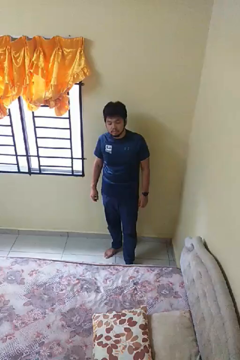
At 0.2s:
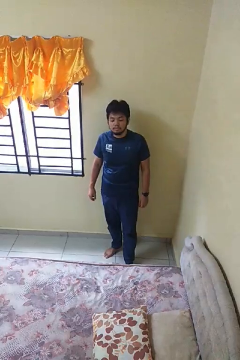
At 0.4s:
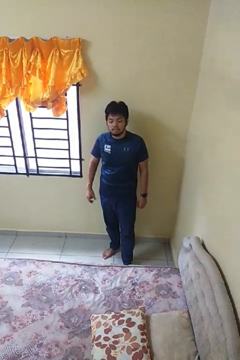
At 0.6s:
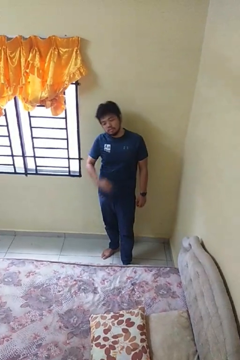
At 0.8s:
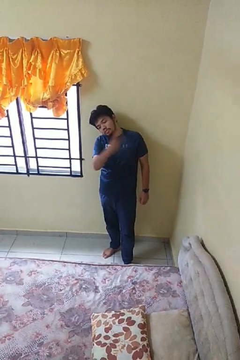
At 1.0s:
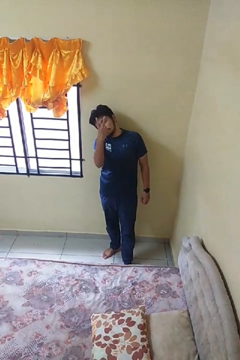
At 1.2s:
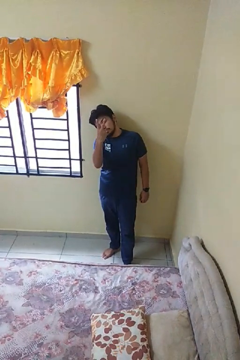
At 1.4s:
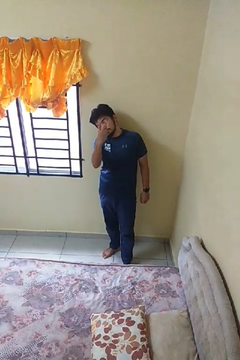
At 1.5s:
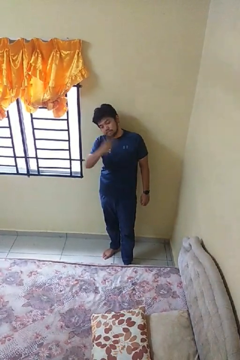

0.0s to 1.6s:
person gestures peace

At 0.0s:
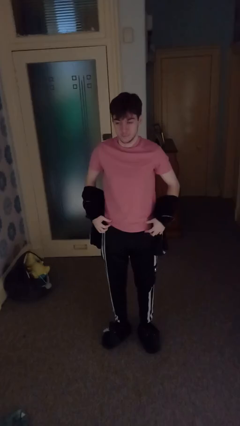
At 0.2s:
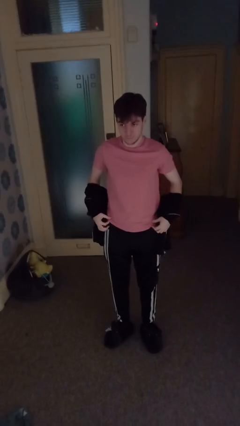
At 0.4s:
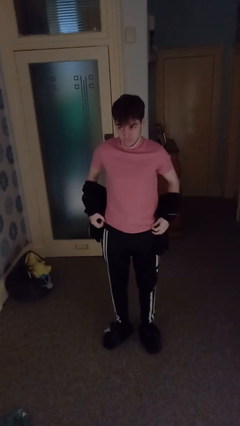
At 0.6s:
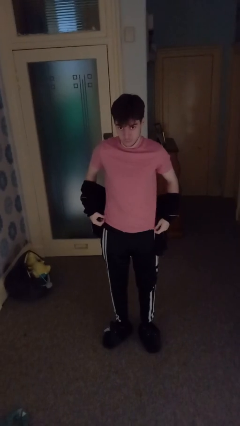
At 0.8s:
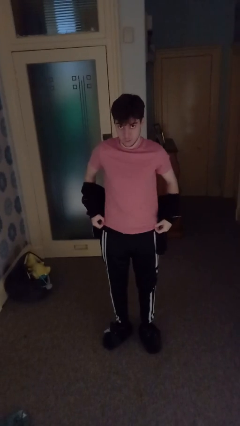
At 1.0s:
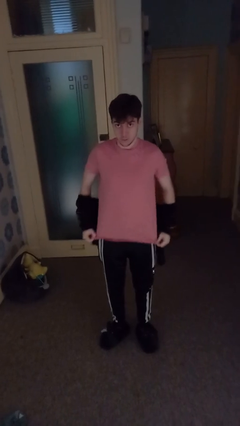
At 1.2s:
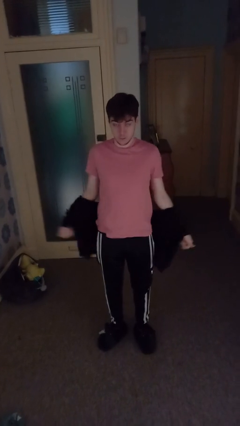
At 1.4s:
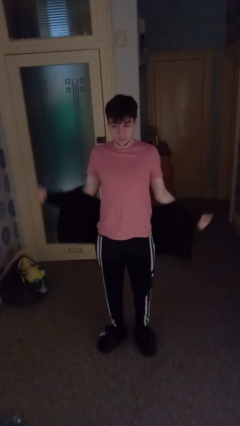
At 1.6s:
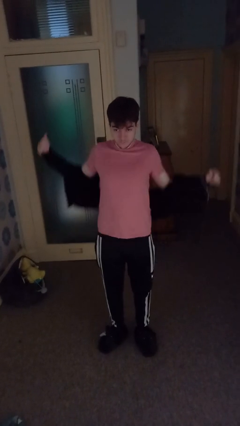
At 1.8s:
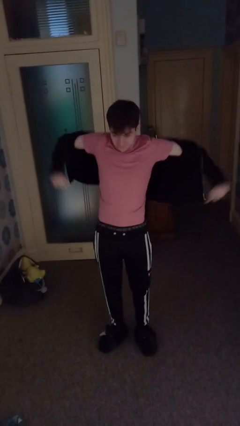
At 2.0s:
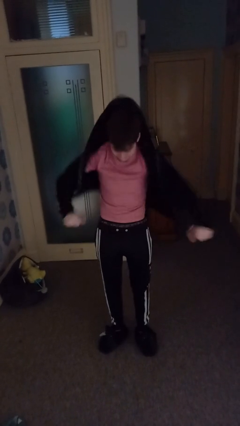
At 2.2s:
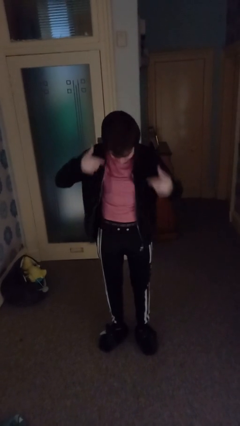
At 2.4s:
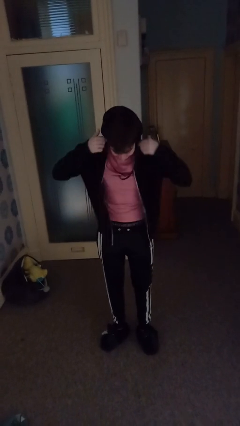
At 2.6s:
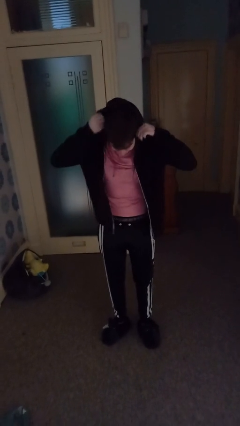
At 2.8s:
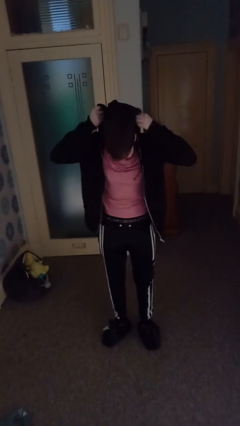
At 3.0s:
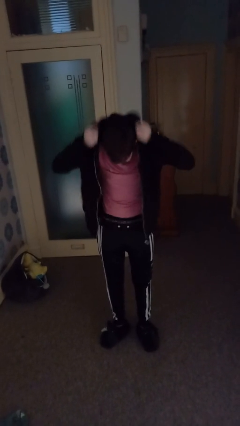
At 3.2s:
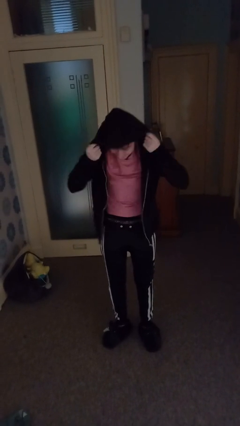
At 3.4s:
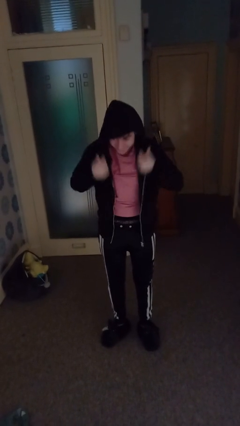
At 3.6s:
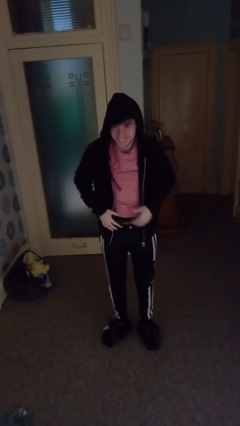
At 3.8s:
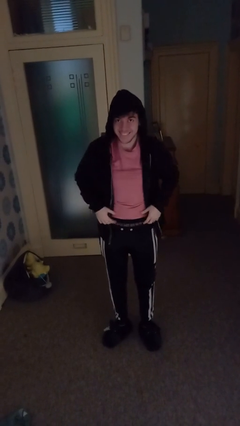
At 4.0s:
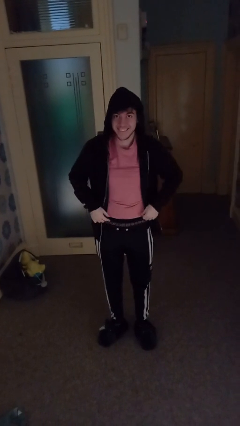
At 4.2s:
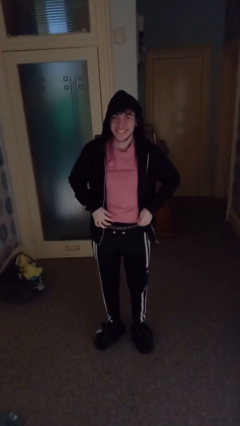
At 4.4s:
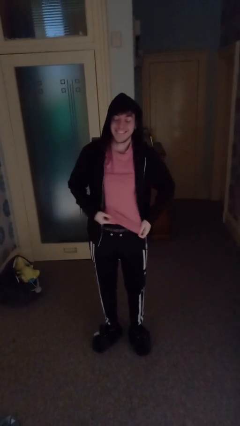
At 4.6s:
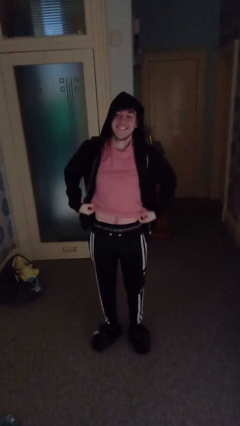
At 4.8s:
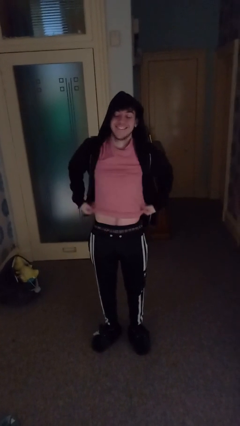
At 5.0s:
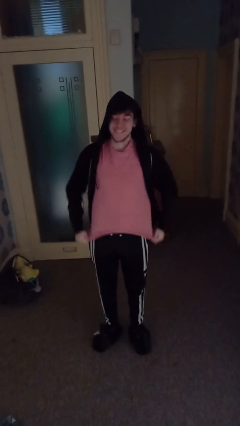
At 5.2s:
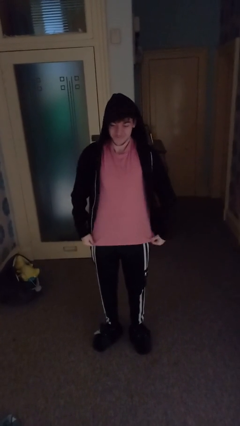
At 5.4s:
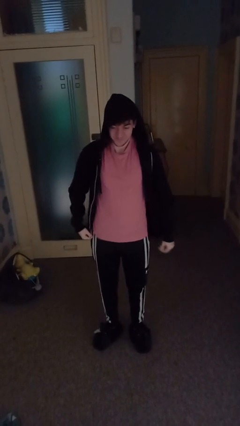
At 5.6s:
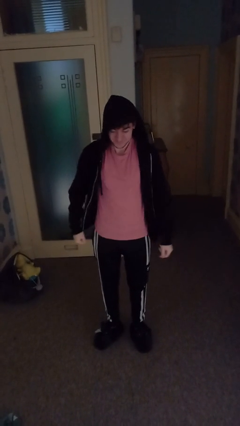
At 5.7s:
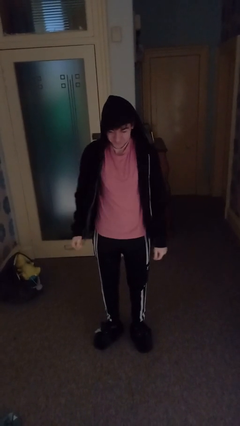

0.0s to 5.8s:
person puts on hoodie

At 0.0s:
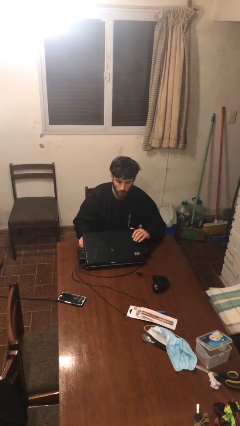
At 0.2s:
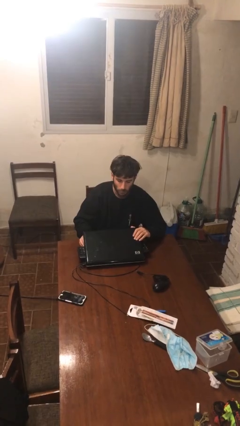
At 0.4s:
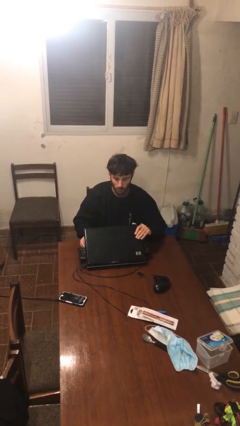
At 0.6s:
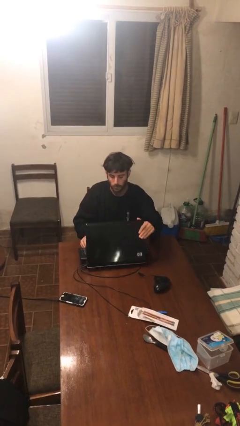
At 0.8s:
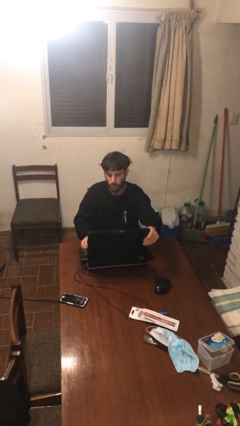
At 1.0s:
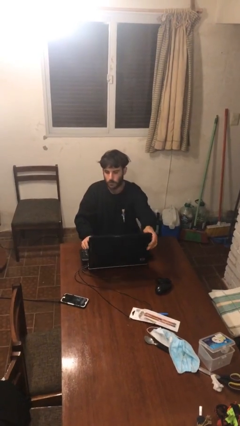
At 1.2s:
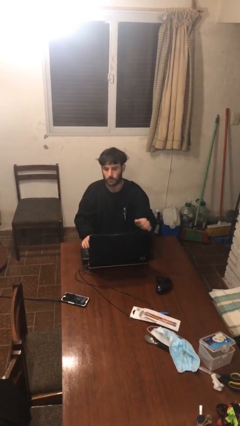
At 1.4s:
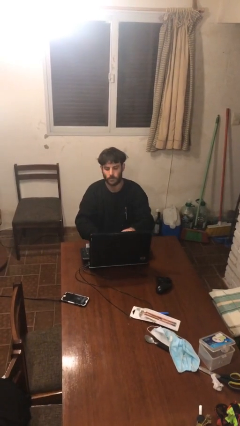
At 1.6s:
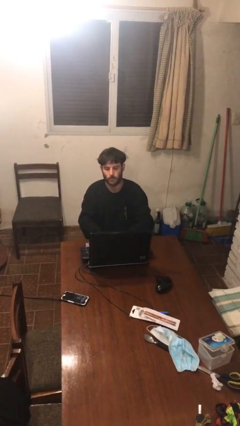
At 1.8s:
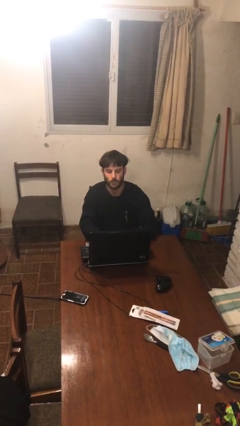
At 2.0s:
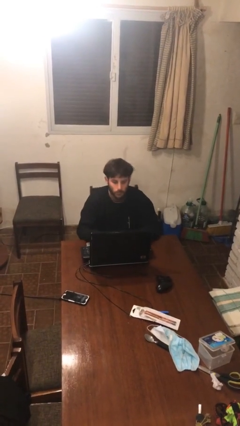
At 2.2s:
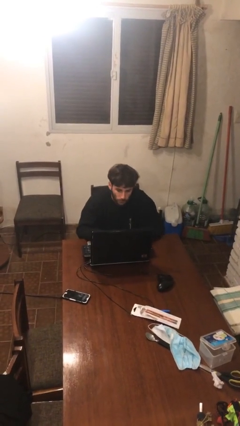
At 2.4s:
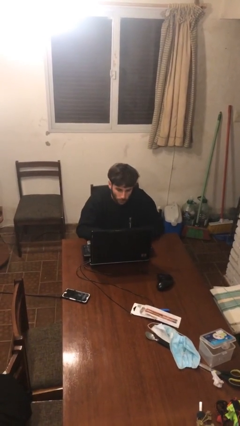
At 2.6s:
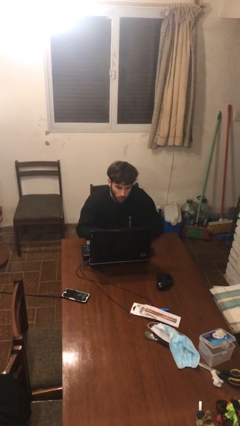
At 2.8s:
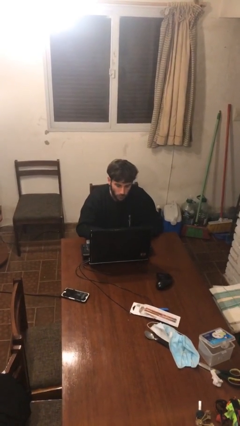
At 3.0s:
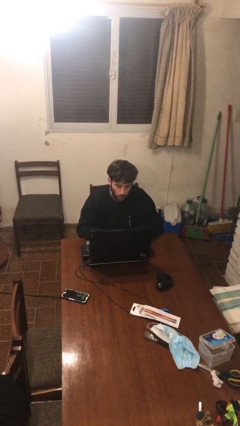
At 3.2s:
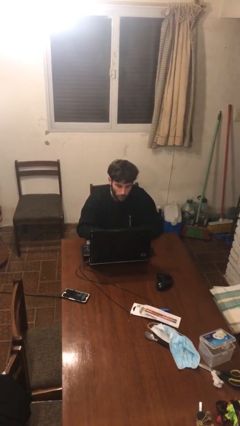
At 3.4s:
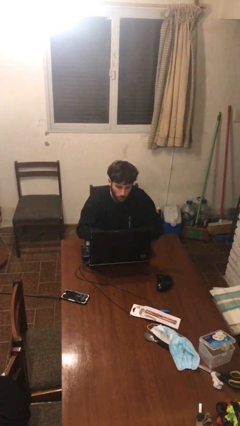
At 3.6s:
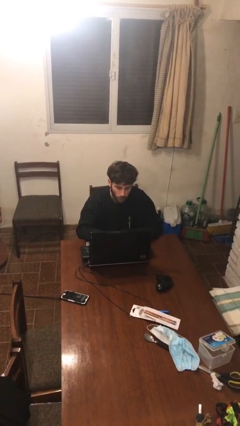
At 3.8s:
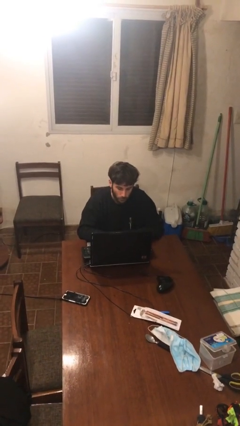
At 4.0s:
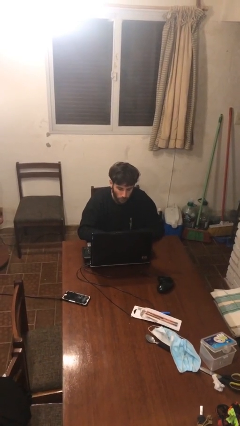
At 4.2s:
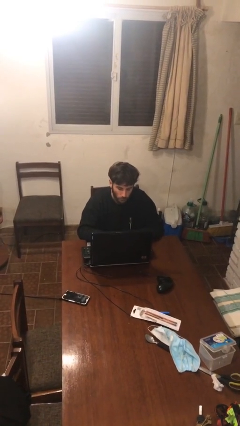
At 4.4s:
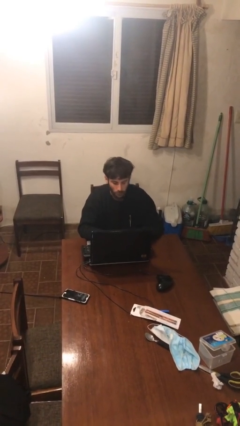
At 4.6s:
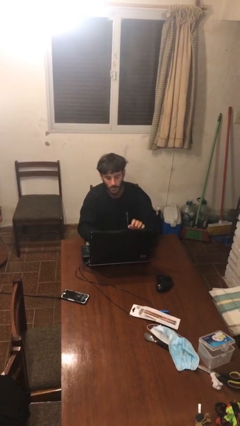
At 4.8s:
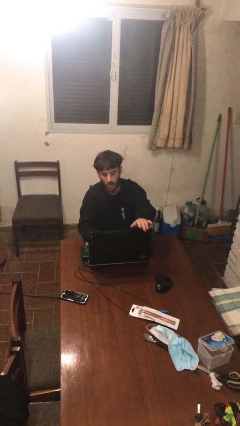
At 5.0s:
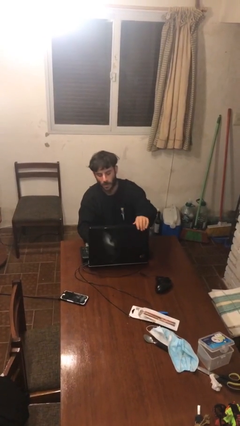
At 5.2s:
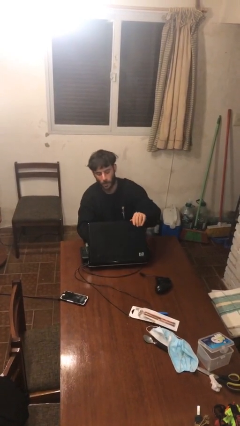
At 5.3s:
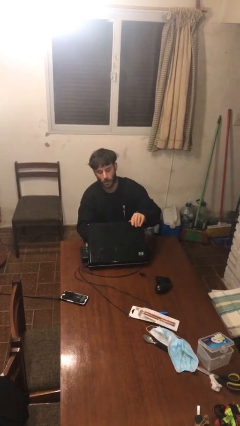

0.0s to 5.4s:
person interacts with laptop

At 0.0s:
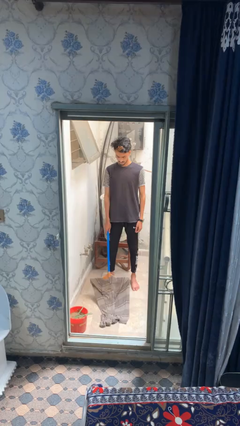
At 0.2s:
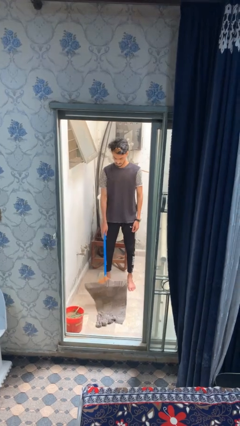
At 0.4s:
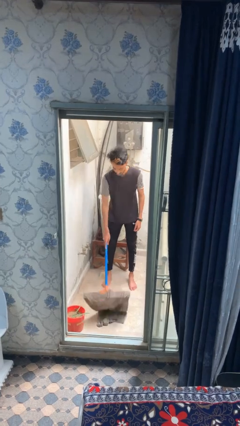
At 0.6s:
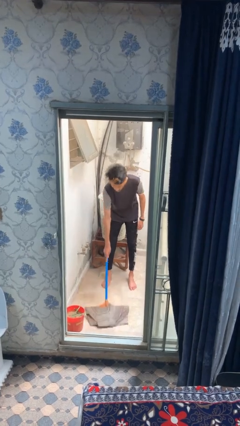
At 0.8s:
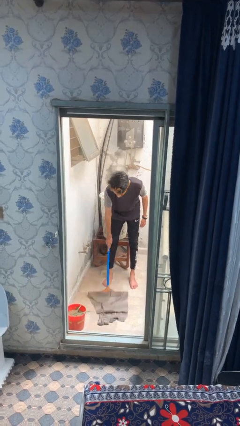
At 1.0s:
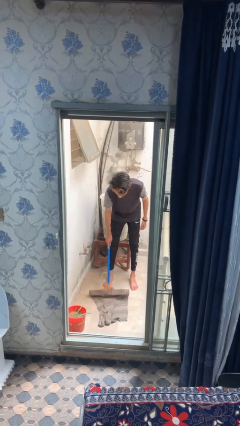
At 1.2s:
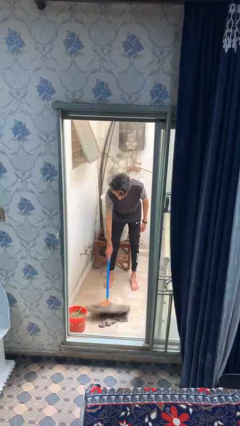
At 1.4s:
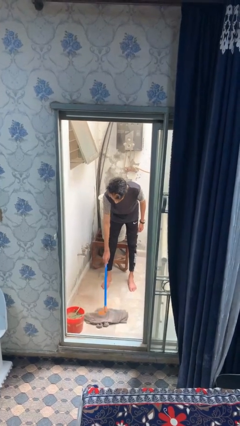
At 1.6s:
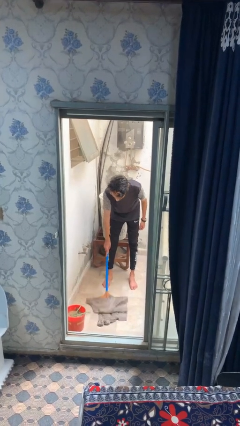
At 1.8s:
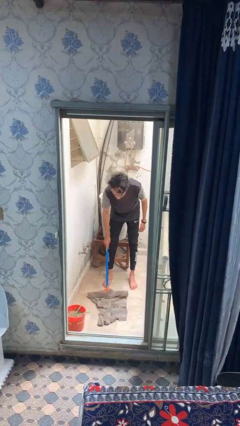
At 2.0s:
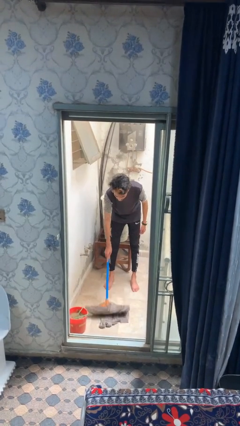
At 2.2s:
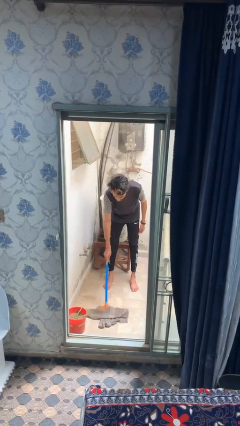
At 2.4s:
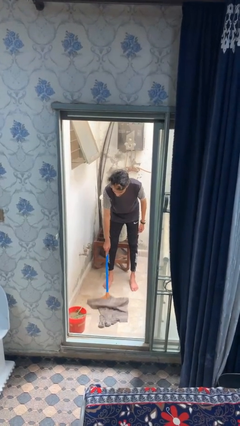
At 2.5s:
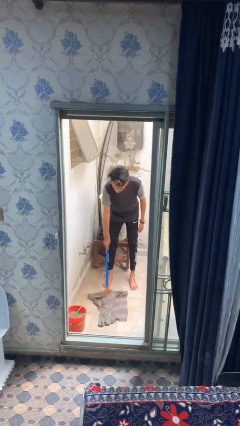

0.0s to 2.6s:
person mops

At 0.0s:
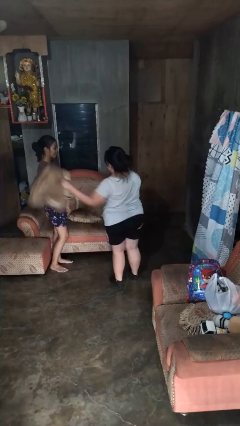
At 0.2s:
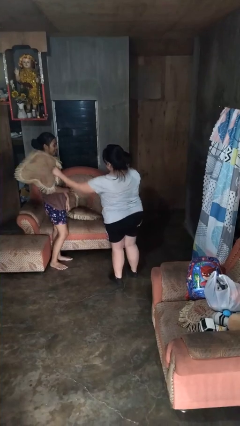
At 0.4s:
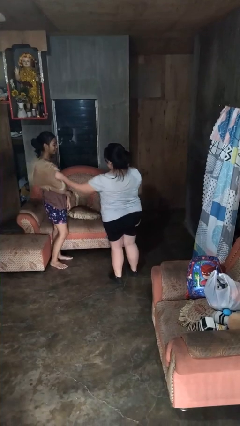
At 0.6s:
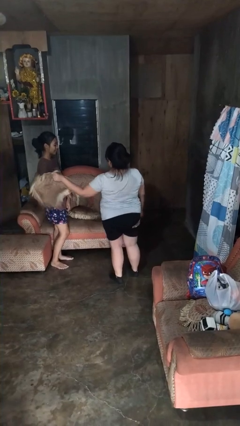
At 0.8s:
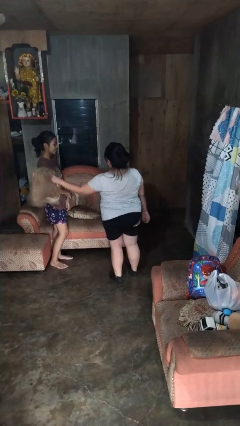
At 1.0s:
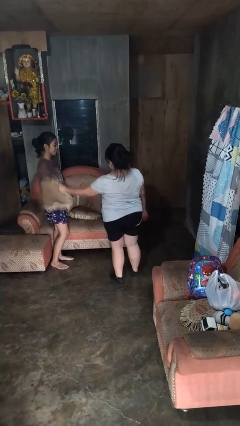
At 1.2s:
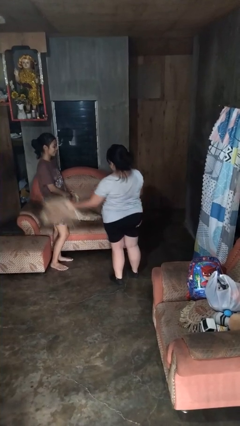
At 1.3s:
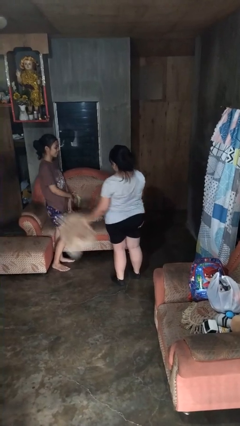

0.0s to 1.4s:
person hits person with pillow

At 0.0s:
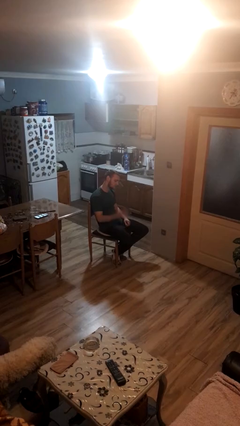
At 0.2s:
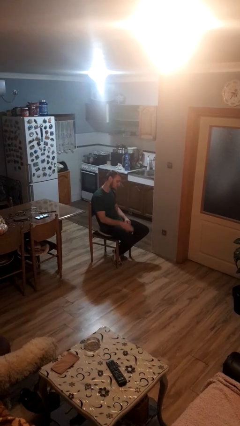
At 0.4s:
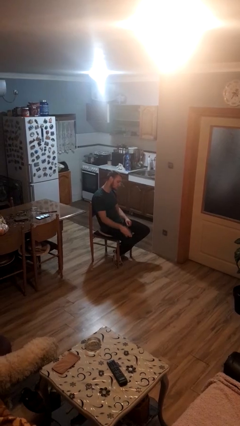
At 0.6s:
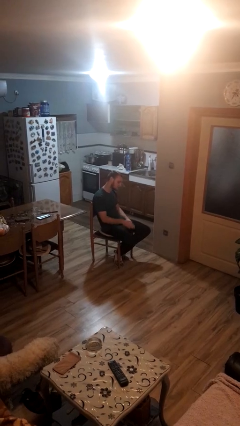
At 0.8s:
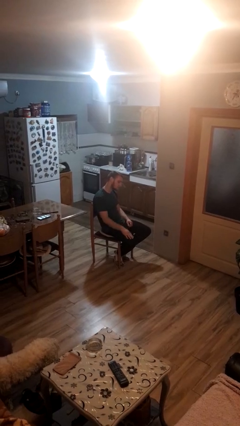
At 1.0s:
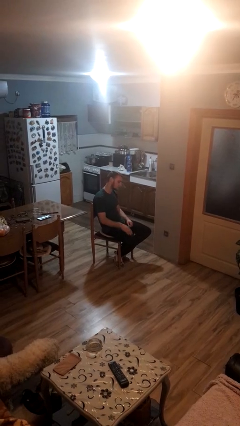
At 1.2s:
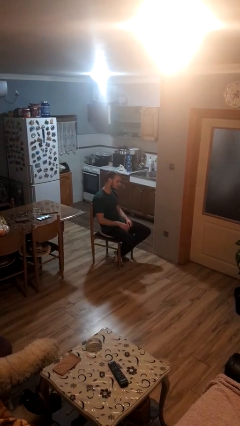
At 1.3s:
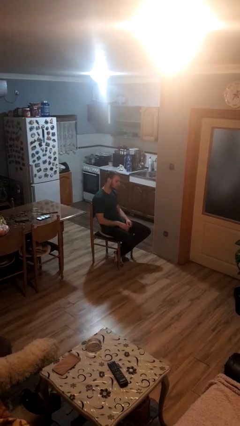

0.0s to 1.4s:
person slaps hands on thighs
